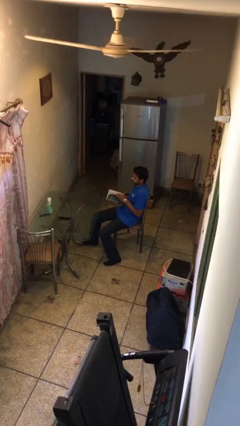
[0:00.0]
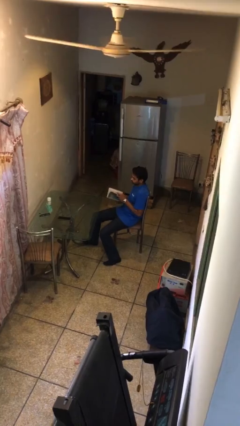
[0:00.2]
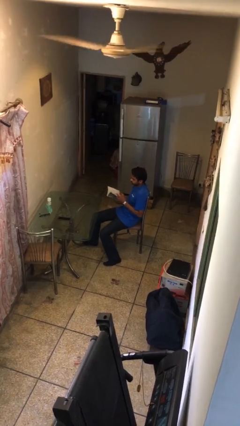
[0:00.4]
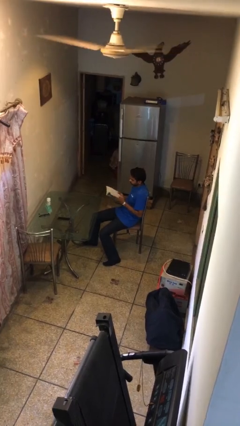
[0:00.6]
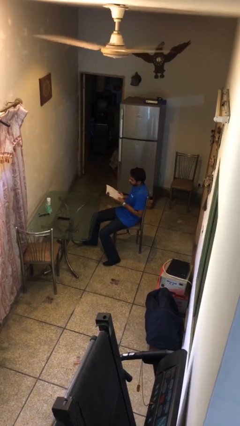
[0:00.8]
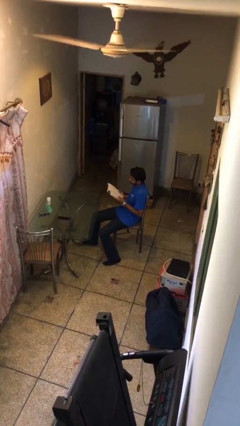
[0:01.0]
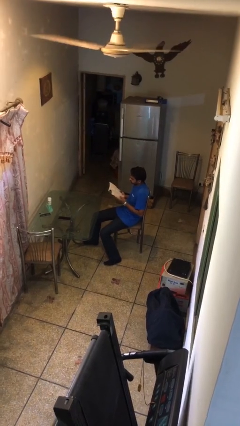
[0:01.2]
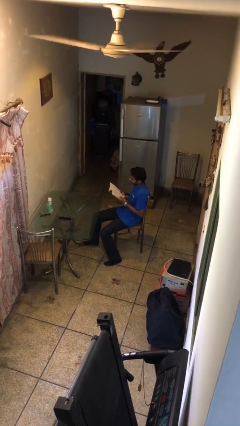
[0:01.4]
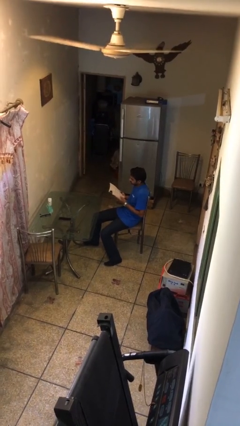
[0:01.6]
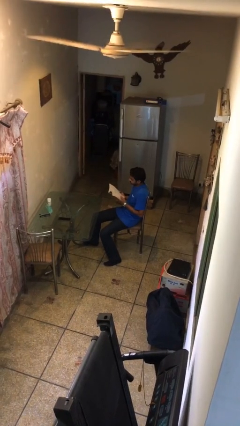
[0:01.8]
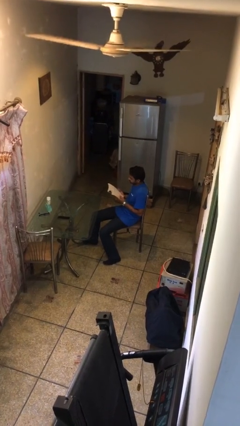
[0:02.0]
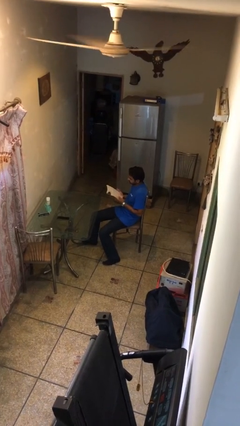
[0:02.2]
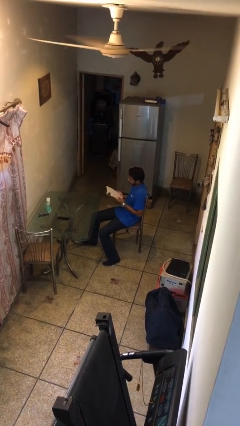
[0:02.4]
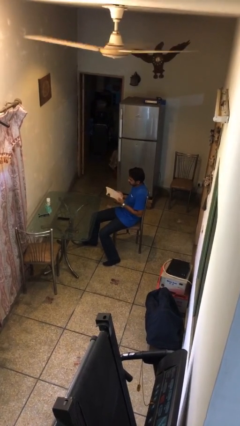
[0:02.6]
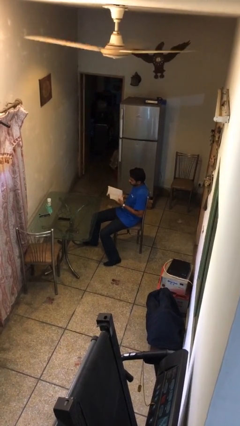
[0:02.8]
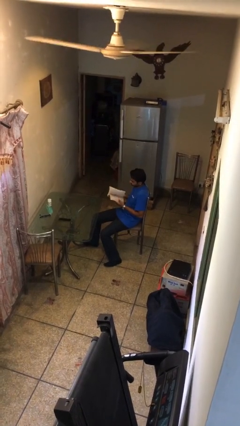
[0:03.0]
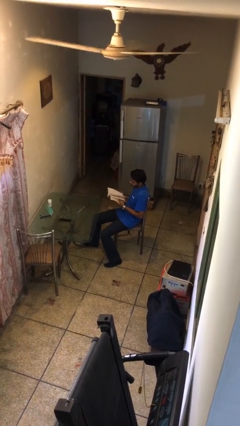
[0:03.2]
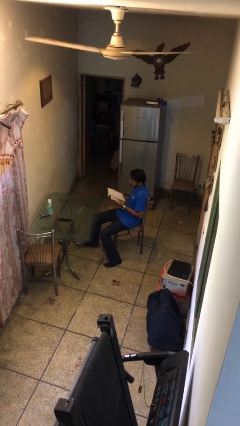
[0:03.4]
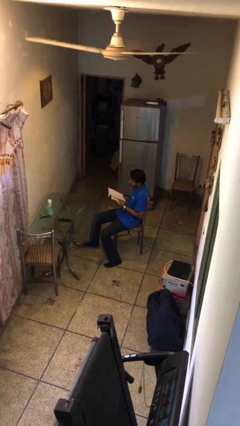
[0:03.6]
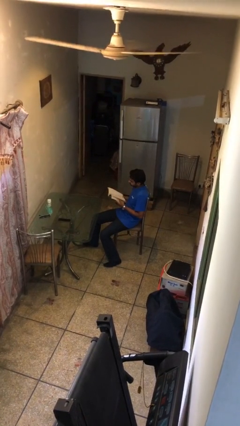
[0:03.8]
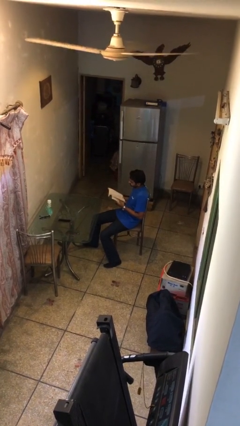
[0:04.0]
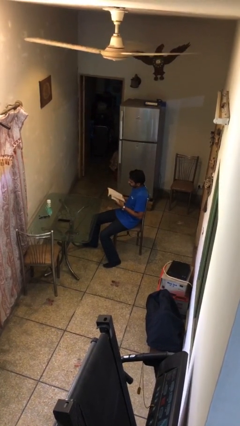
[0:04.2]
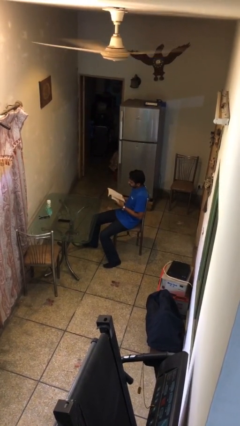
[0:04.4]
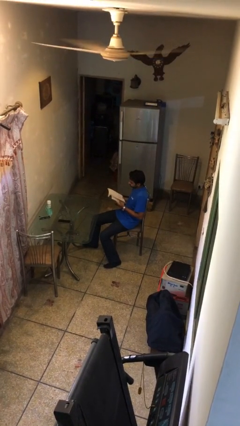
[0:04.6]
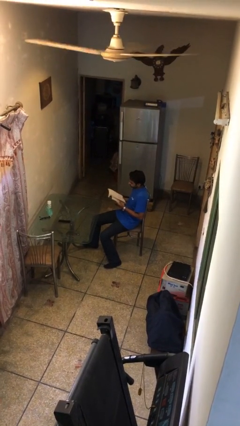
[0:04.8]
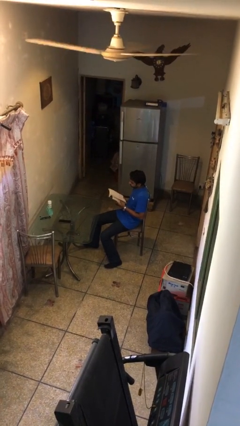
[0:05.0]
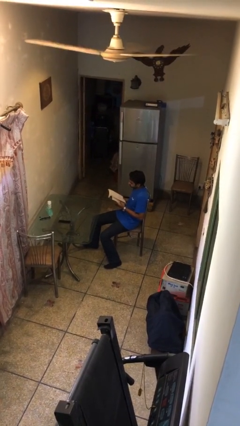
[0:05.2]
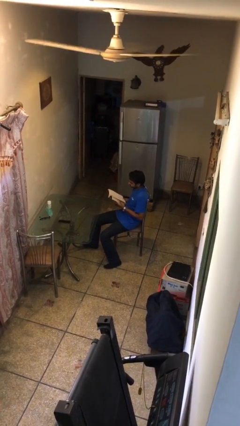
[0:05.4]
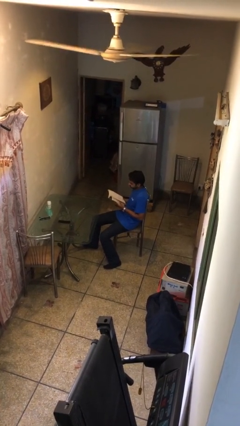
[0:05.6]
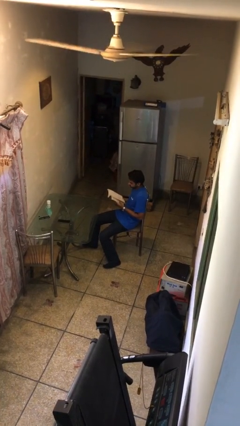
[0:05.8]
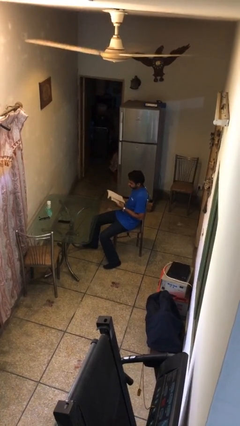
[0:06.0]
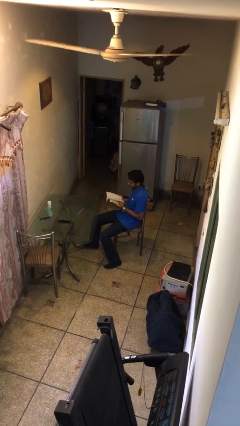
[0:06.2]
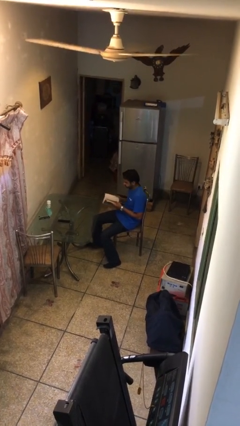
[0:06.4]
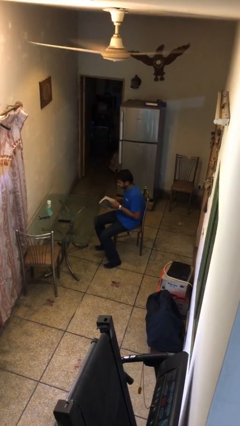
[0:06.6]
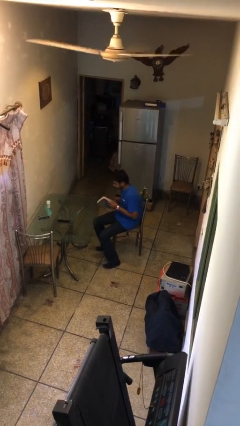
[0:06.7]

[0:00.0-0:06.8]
person reads document

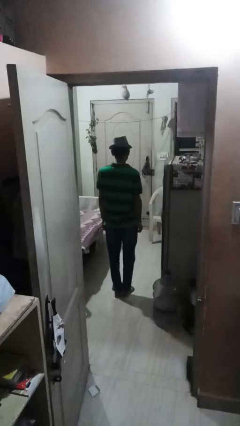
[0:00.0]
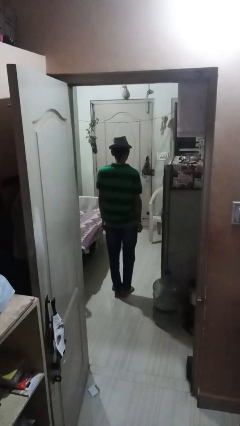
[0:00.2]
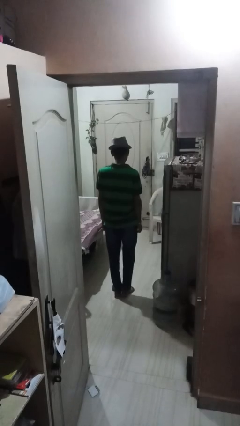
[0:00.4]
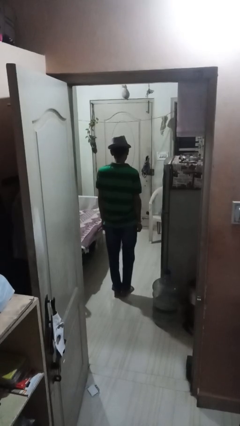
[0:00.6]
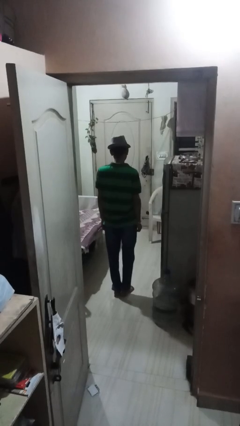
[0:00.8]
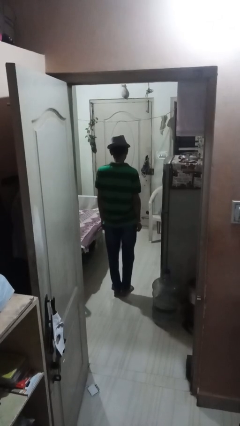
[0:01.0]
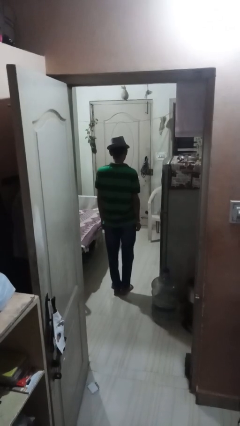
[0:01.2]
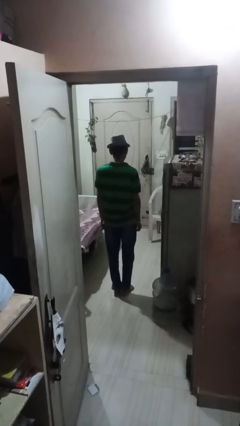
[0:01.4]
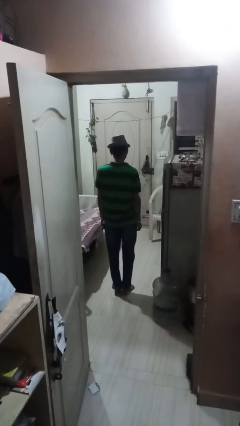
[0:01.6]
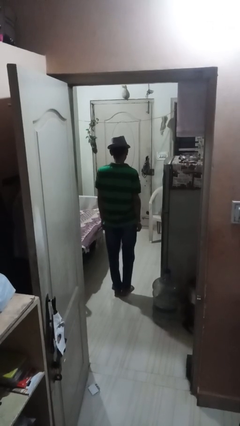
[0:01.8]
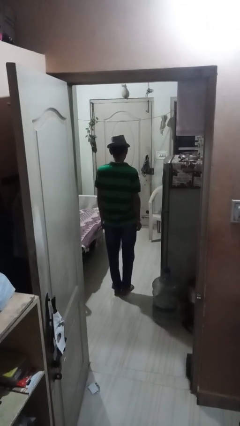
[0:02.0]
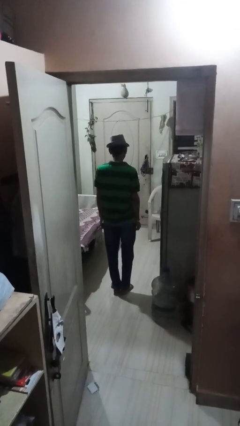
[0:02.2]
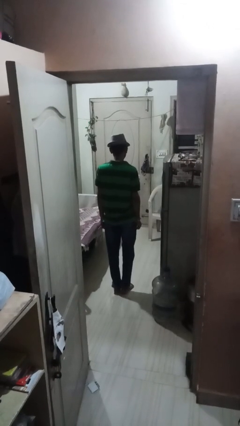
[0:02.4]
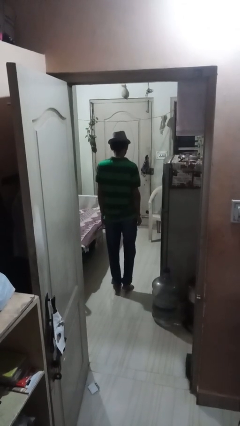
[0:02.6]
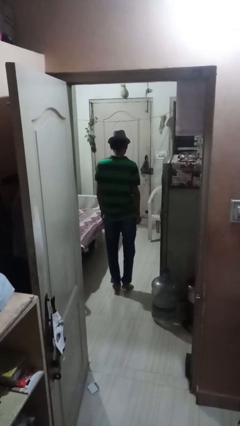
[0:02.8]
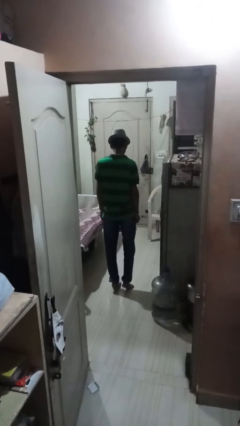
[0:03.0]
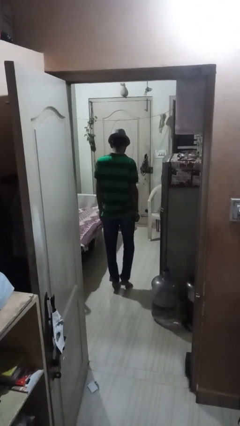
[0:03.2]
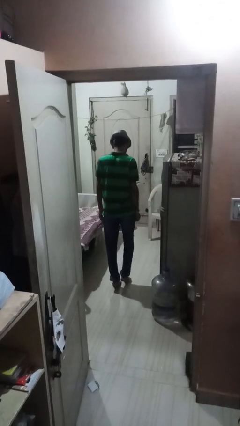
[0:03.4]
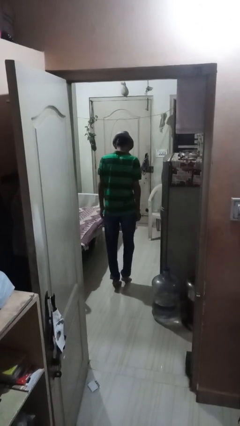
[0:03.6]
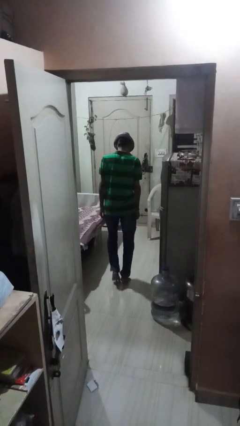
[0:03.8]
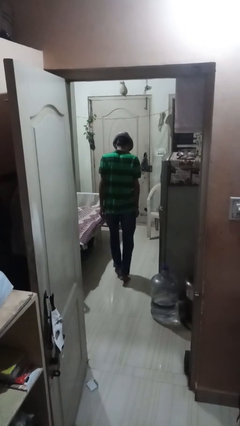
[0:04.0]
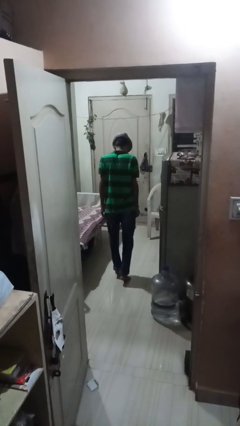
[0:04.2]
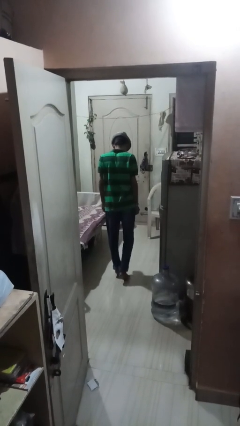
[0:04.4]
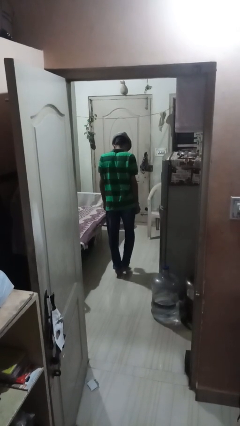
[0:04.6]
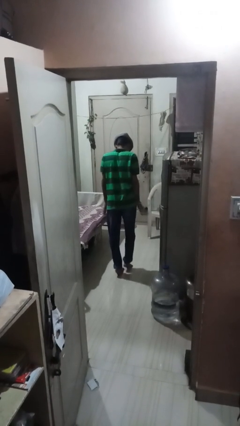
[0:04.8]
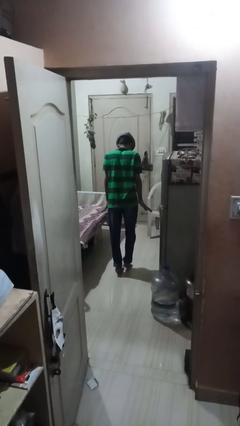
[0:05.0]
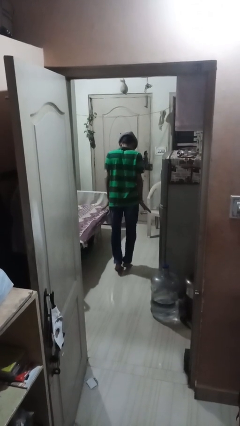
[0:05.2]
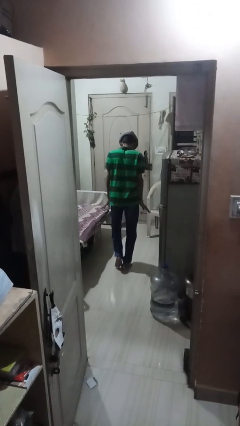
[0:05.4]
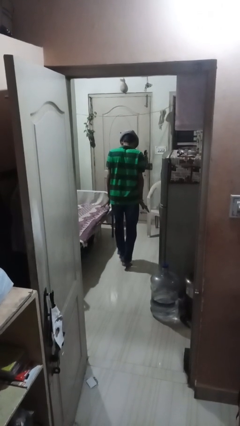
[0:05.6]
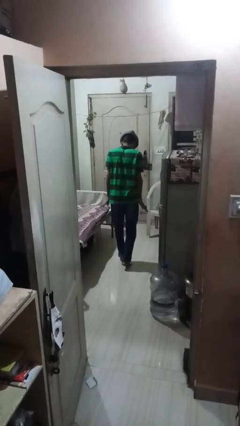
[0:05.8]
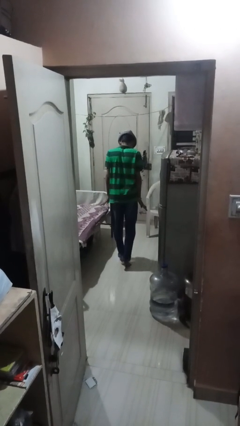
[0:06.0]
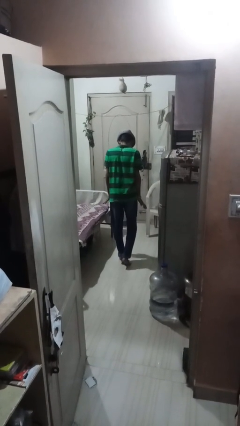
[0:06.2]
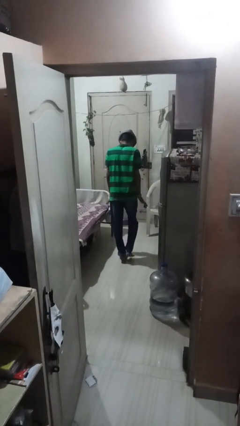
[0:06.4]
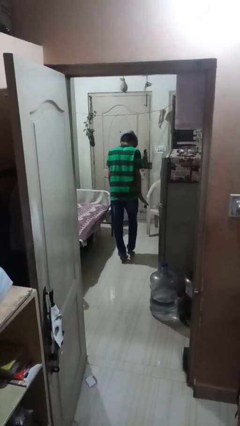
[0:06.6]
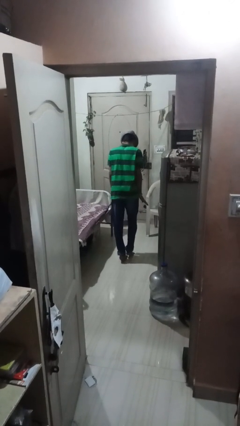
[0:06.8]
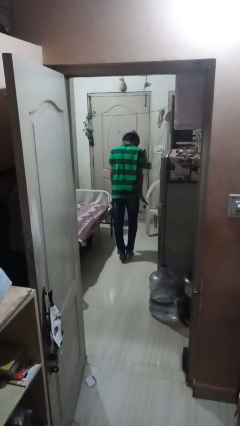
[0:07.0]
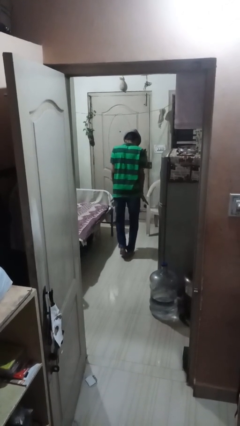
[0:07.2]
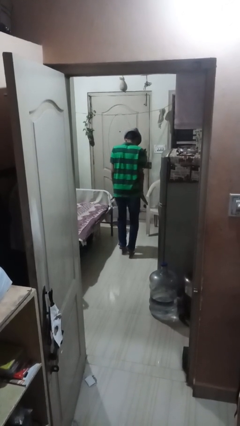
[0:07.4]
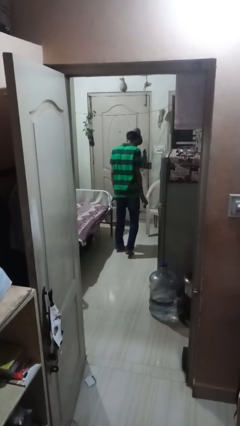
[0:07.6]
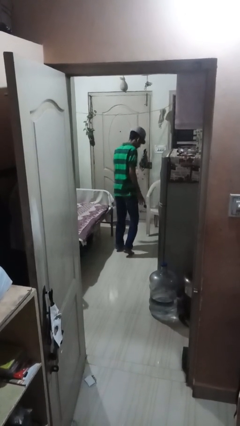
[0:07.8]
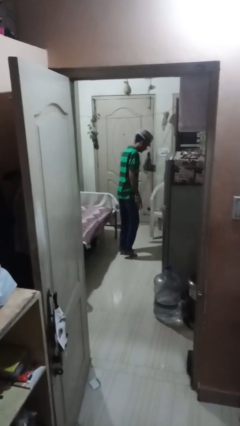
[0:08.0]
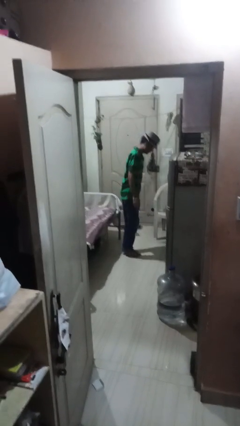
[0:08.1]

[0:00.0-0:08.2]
person walks tiptoe

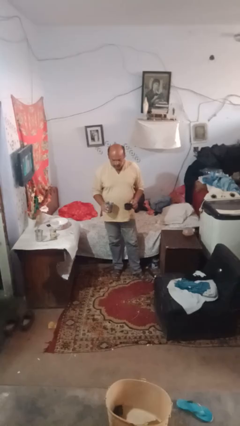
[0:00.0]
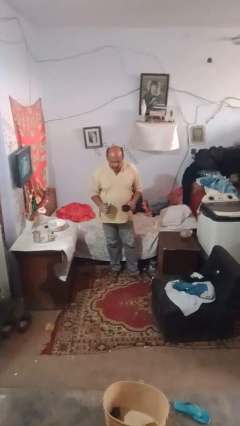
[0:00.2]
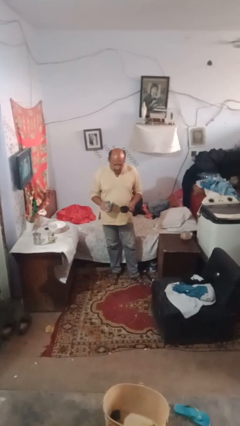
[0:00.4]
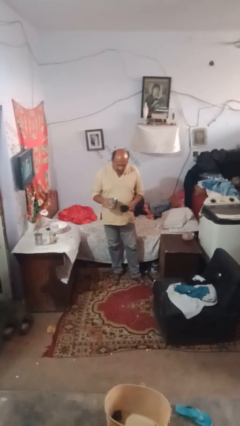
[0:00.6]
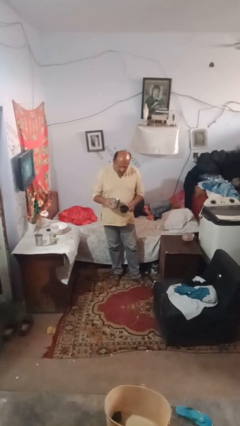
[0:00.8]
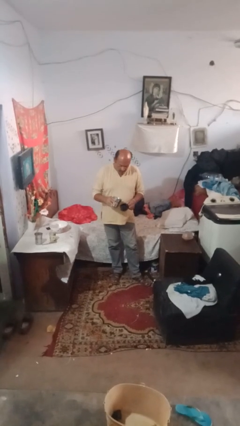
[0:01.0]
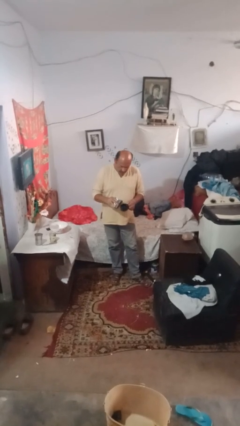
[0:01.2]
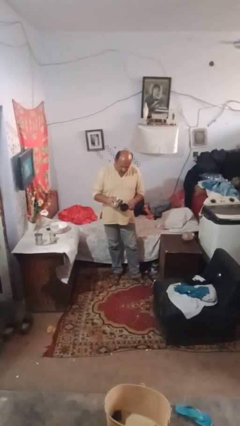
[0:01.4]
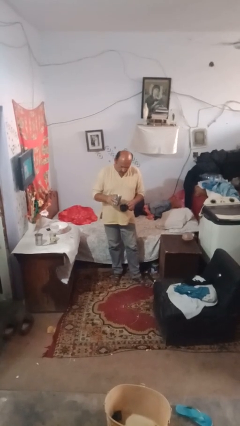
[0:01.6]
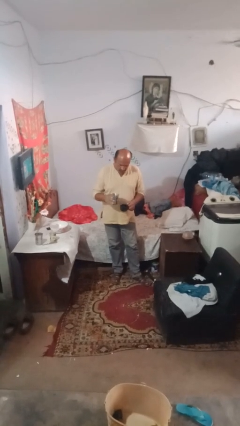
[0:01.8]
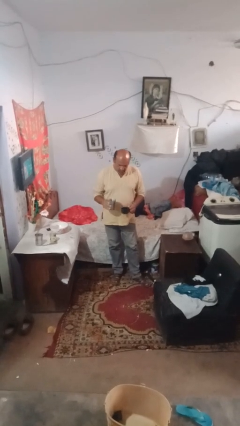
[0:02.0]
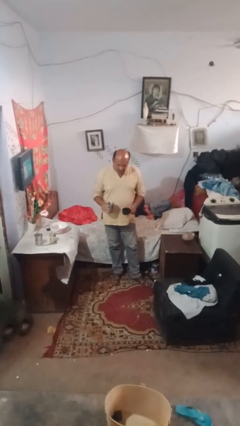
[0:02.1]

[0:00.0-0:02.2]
person pours liquid into cup

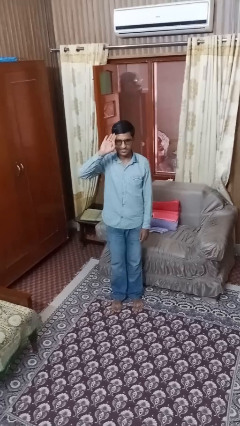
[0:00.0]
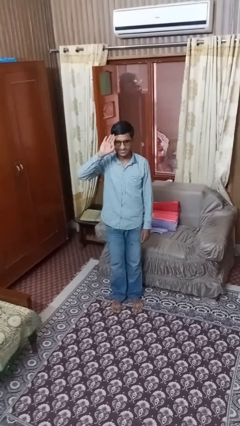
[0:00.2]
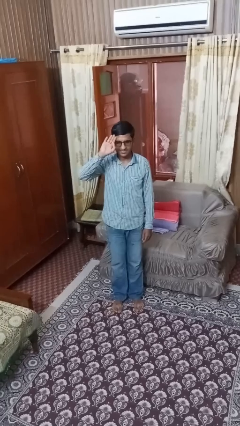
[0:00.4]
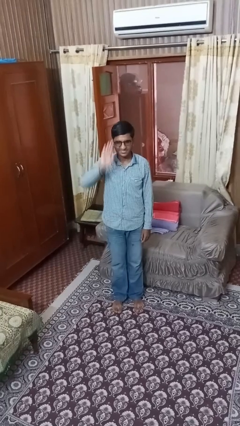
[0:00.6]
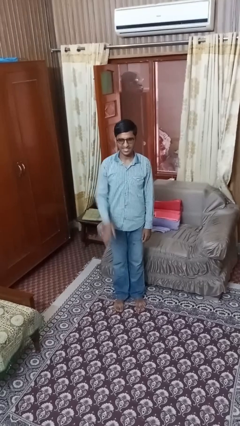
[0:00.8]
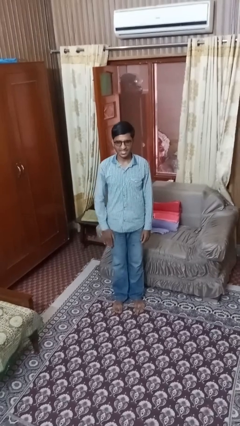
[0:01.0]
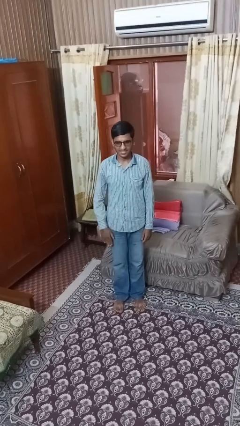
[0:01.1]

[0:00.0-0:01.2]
person salutes
